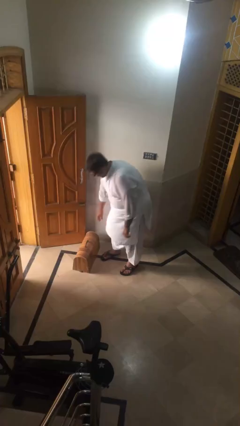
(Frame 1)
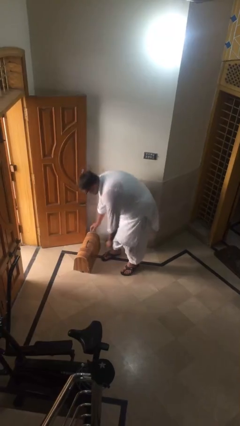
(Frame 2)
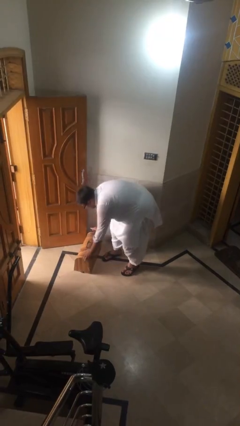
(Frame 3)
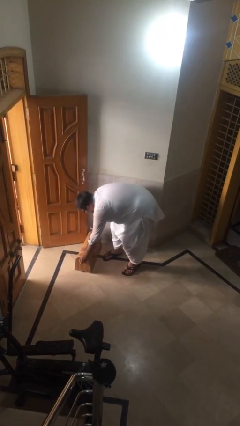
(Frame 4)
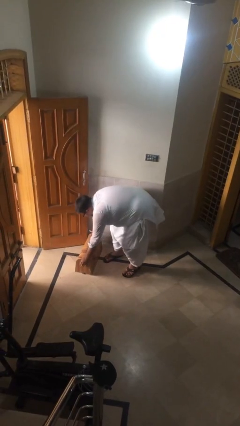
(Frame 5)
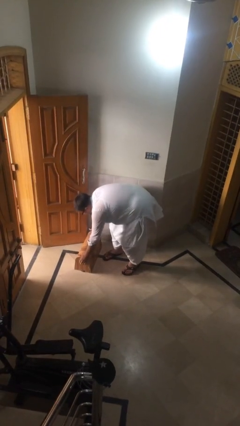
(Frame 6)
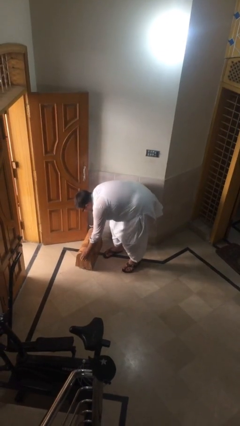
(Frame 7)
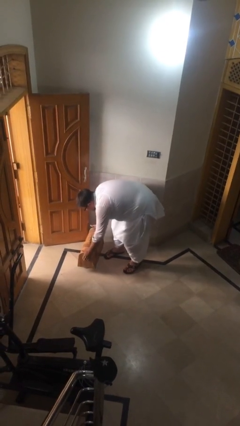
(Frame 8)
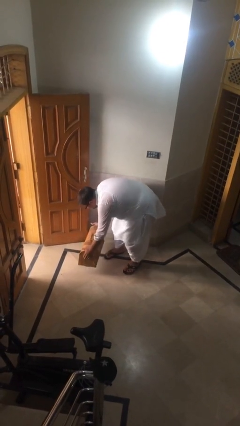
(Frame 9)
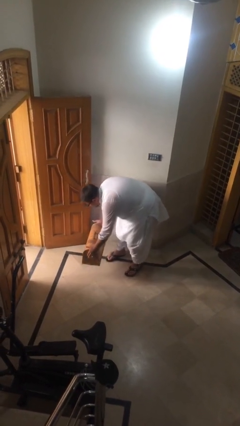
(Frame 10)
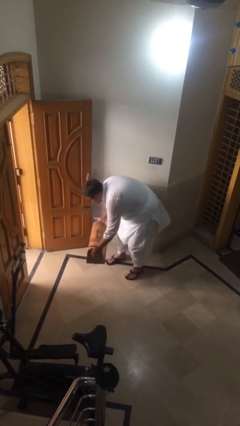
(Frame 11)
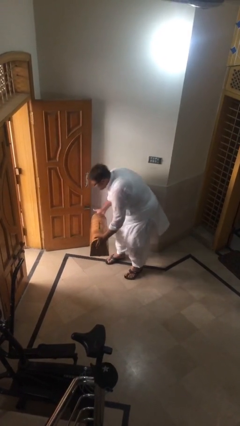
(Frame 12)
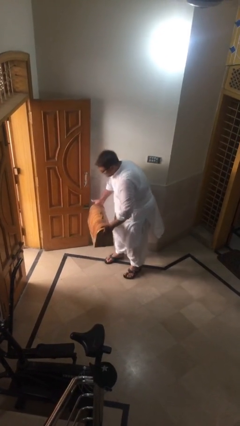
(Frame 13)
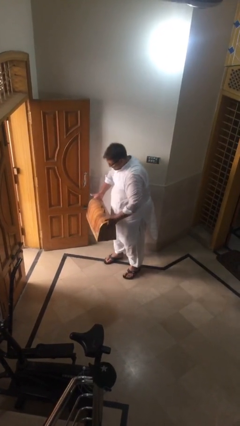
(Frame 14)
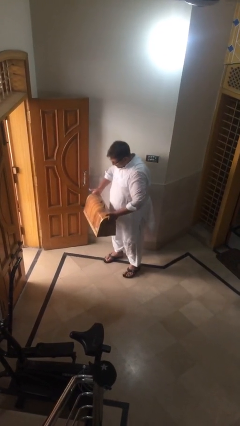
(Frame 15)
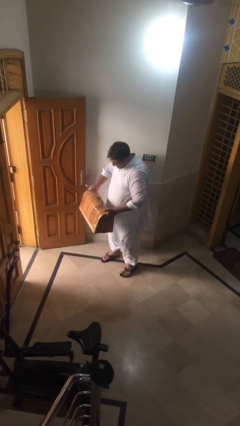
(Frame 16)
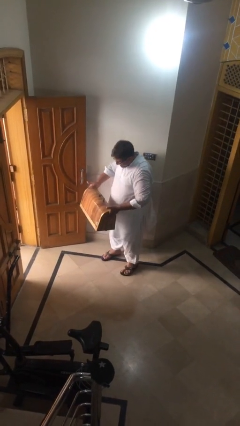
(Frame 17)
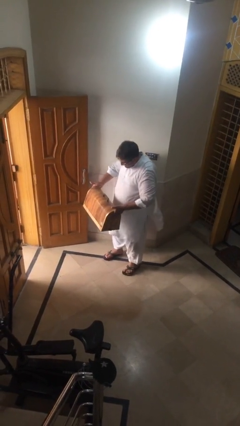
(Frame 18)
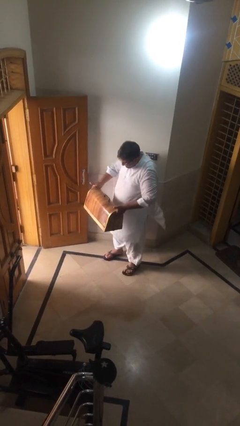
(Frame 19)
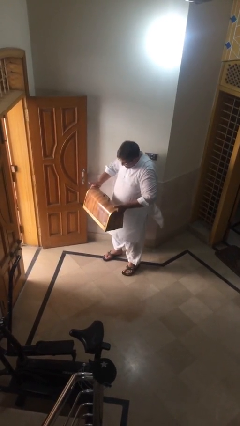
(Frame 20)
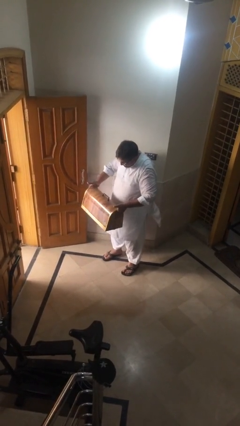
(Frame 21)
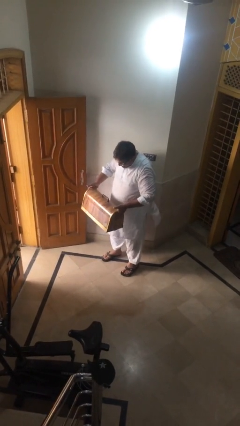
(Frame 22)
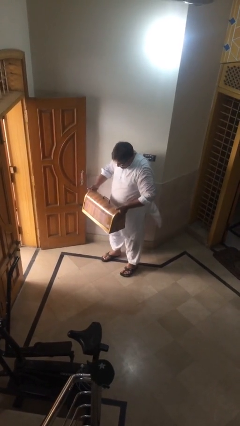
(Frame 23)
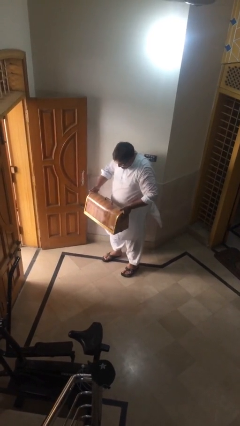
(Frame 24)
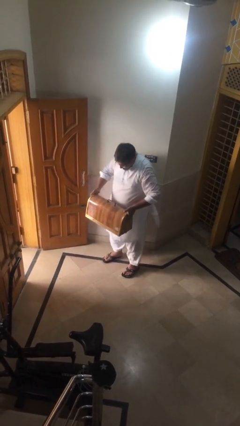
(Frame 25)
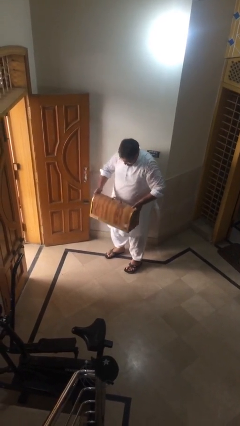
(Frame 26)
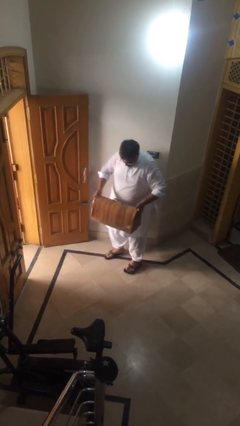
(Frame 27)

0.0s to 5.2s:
person picks up object from floor

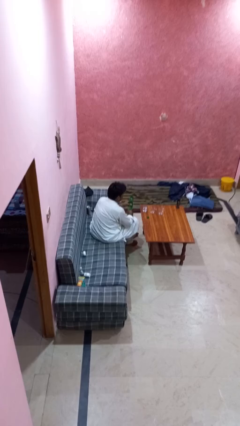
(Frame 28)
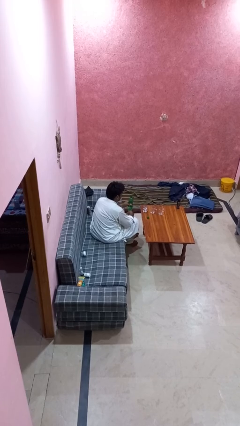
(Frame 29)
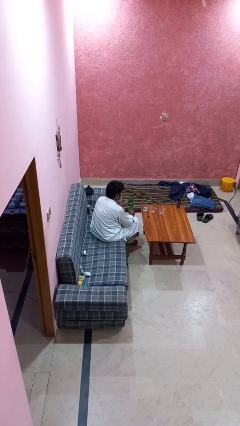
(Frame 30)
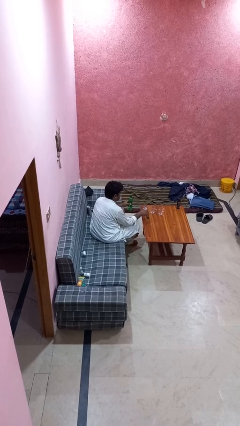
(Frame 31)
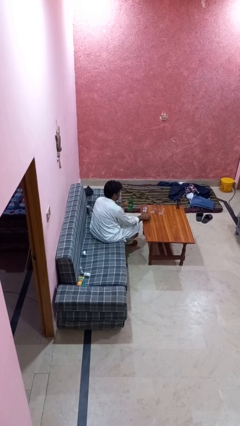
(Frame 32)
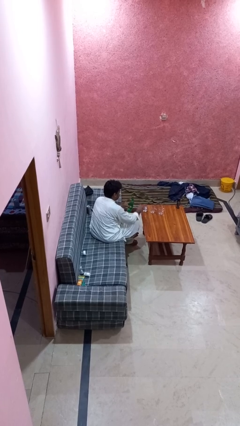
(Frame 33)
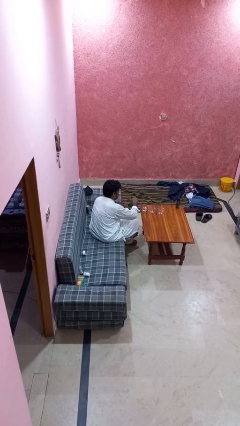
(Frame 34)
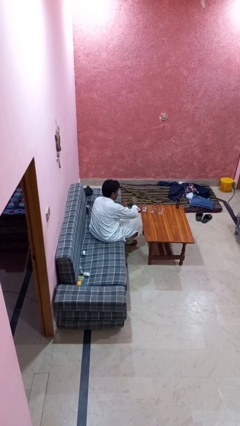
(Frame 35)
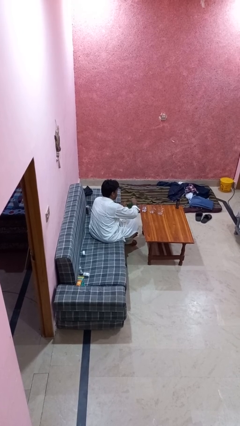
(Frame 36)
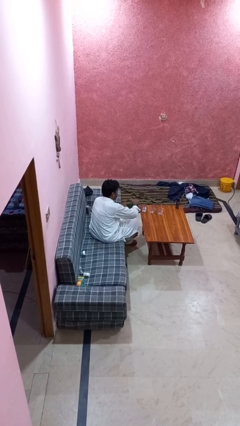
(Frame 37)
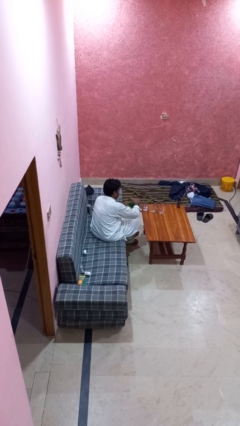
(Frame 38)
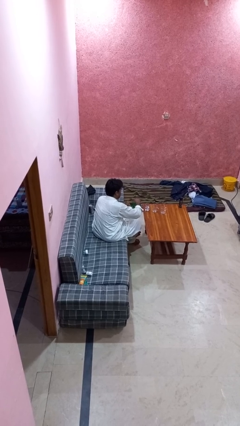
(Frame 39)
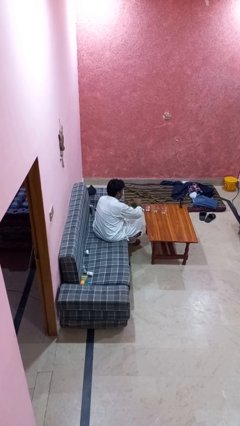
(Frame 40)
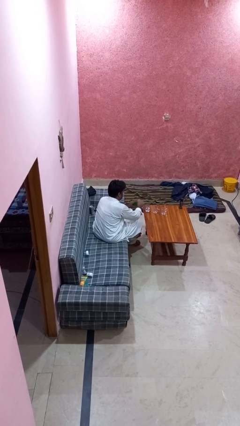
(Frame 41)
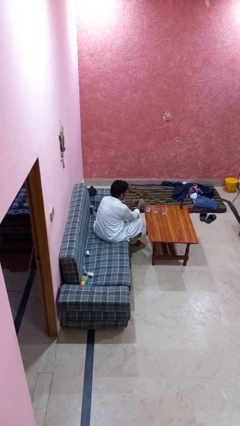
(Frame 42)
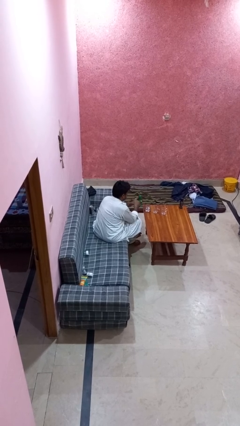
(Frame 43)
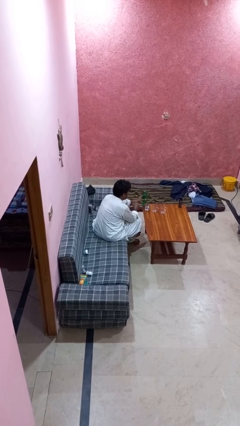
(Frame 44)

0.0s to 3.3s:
person screws lid to bottle

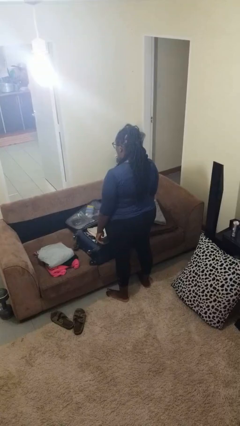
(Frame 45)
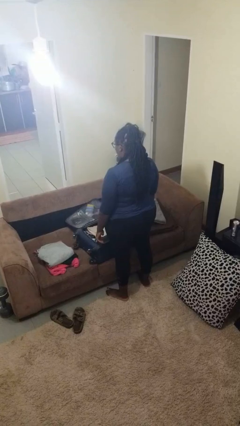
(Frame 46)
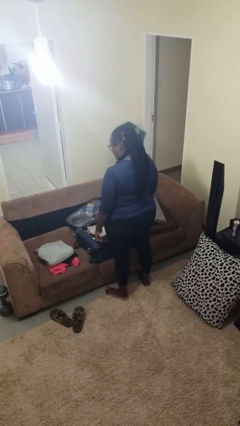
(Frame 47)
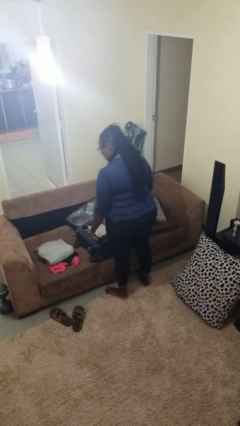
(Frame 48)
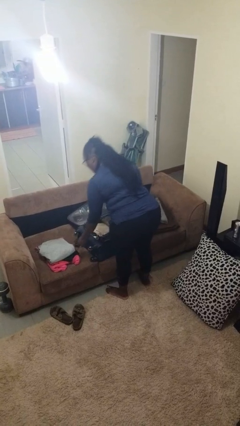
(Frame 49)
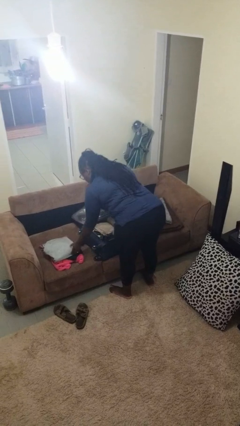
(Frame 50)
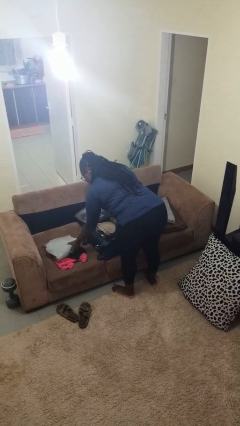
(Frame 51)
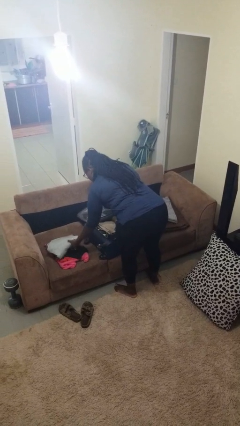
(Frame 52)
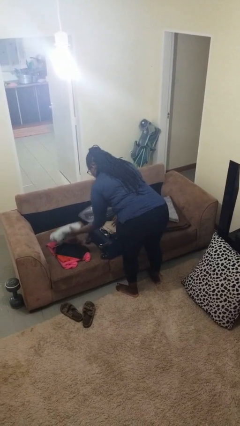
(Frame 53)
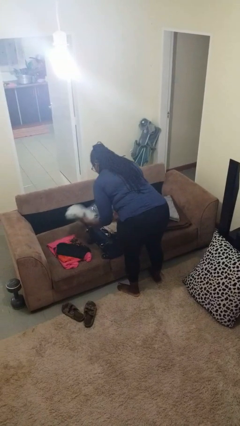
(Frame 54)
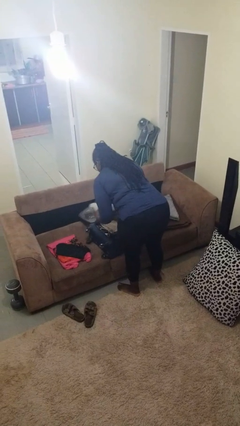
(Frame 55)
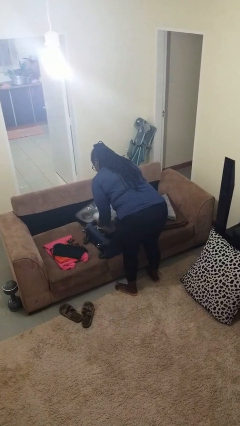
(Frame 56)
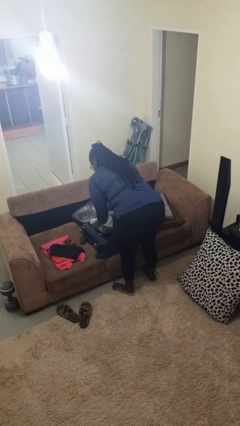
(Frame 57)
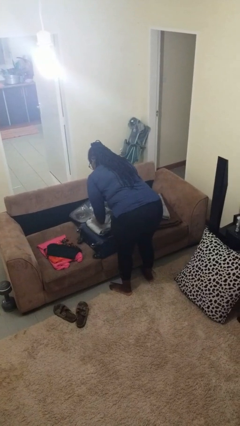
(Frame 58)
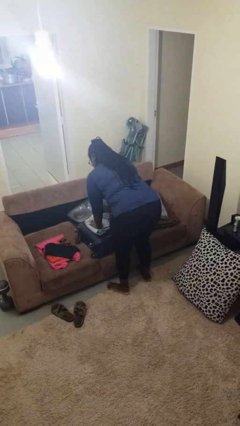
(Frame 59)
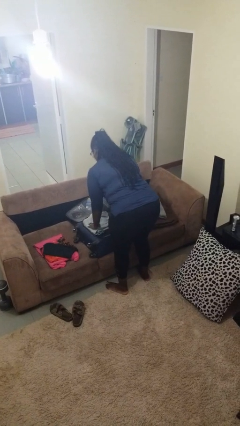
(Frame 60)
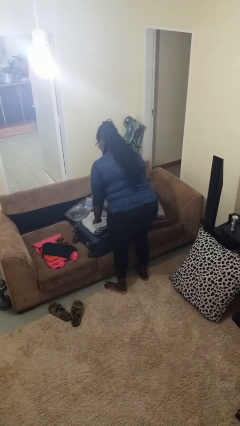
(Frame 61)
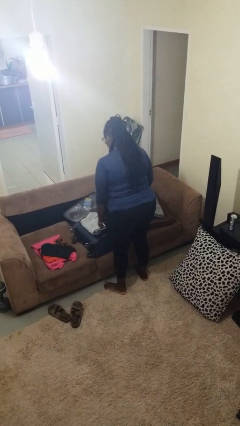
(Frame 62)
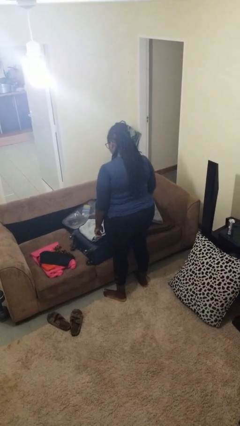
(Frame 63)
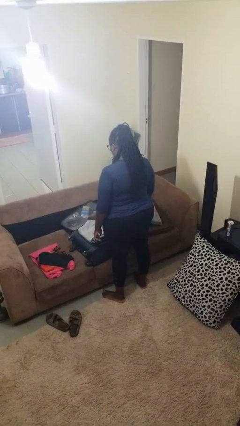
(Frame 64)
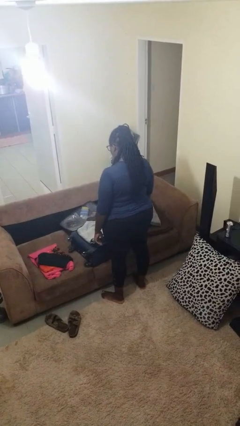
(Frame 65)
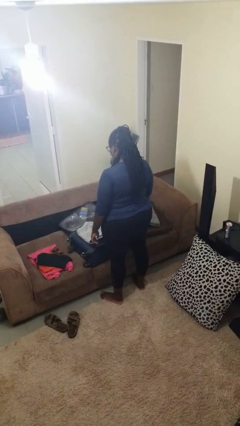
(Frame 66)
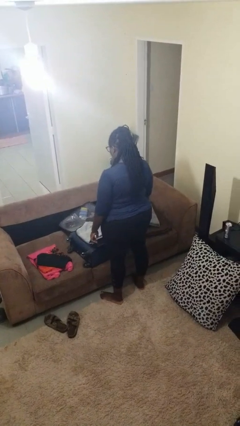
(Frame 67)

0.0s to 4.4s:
person loads clothes into suitcase

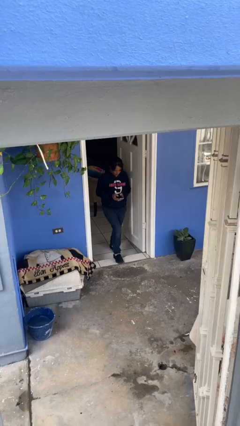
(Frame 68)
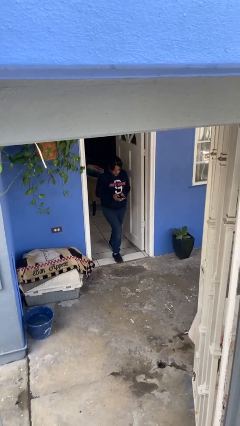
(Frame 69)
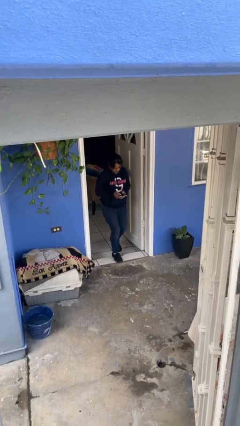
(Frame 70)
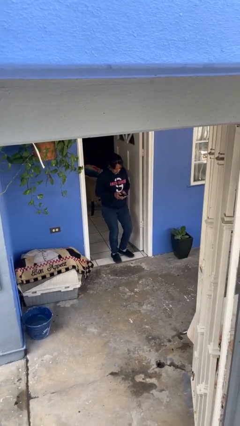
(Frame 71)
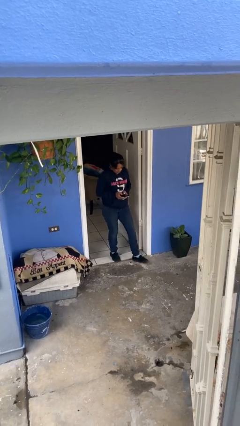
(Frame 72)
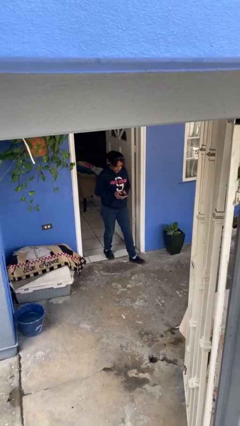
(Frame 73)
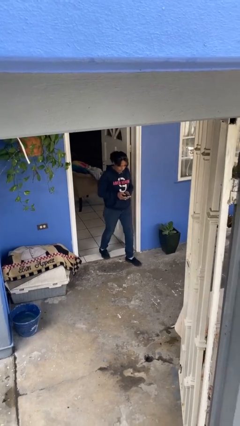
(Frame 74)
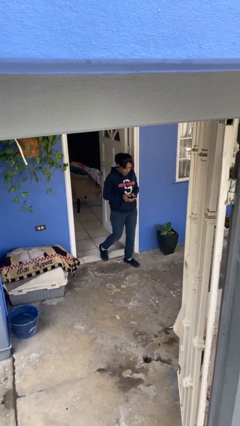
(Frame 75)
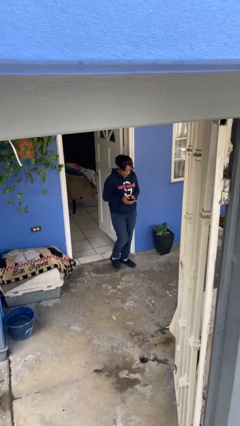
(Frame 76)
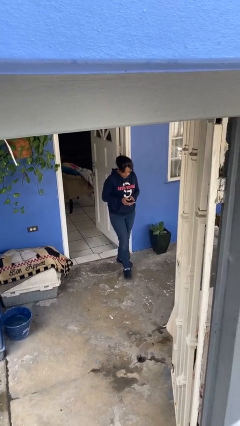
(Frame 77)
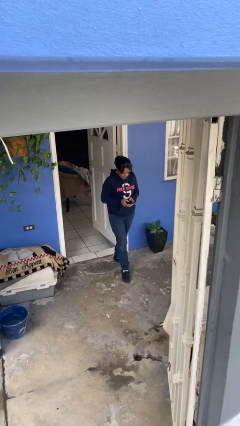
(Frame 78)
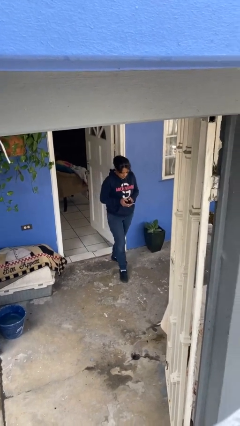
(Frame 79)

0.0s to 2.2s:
person enters scene through structure

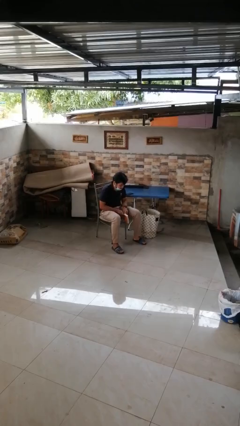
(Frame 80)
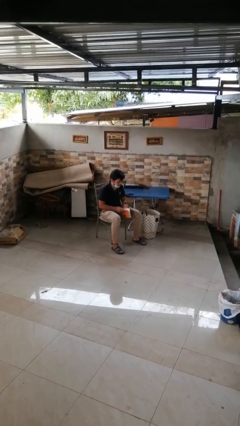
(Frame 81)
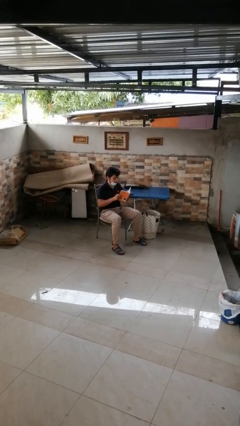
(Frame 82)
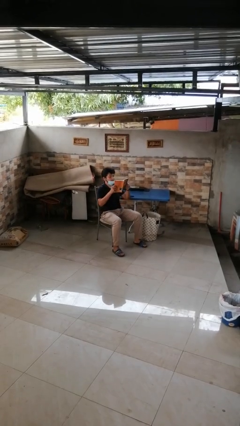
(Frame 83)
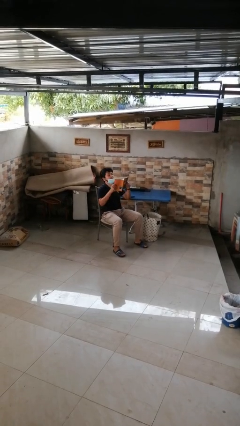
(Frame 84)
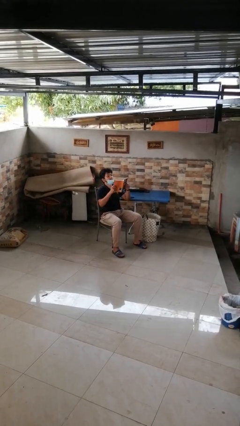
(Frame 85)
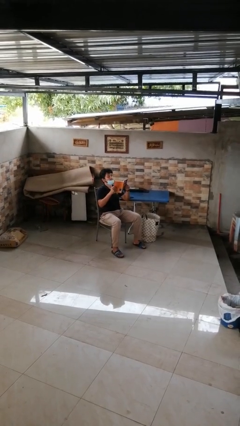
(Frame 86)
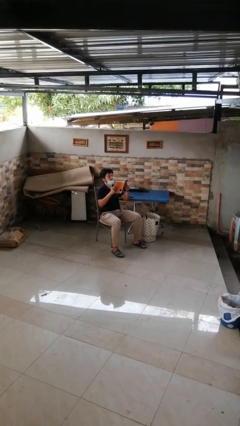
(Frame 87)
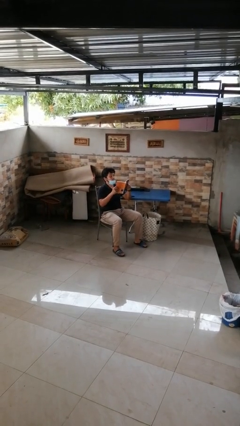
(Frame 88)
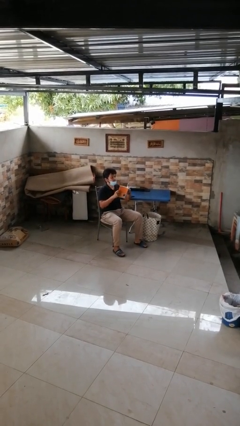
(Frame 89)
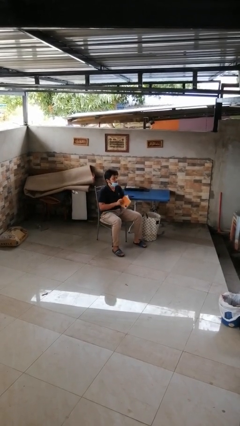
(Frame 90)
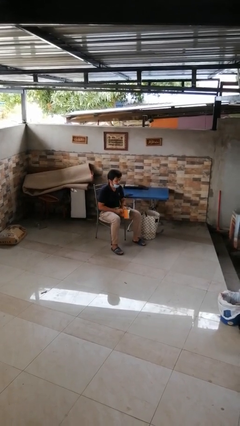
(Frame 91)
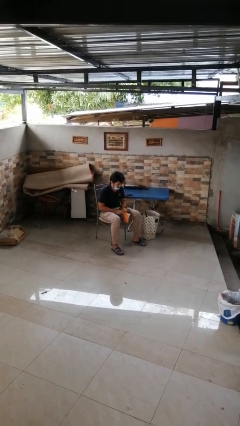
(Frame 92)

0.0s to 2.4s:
person reads book
